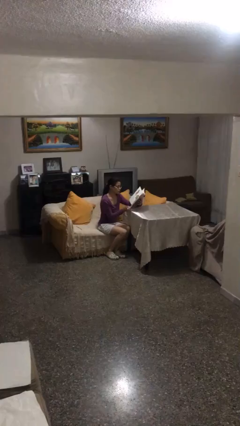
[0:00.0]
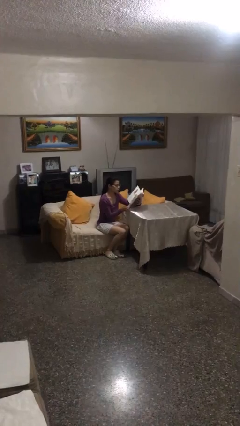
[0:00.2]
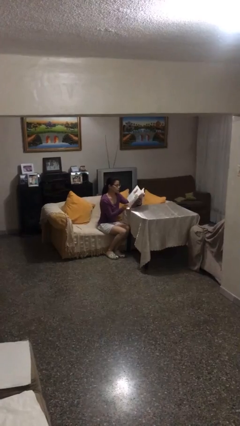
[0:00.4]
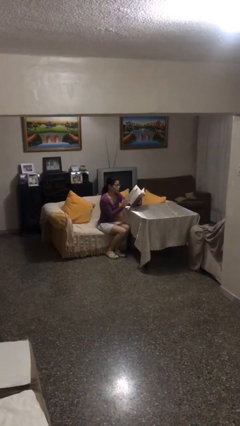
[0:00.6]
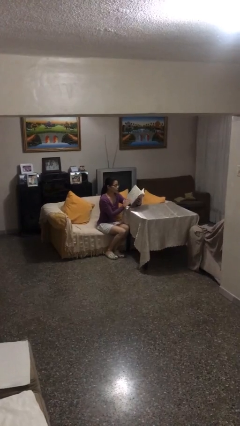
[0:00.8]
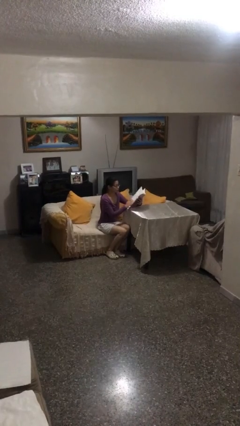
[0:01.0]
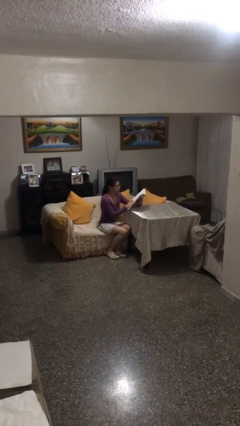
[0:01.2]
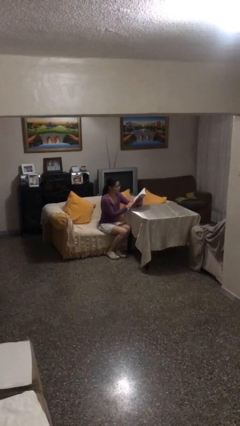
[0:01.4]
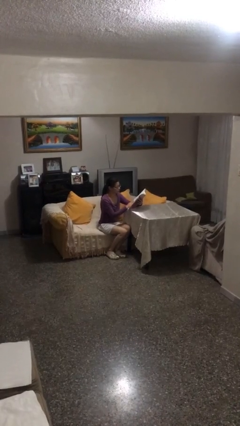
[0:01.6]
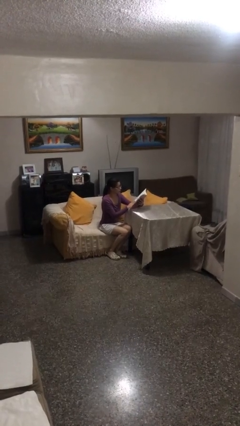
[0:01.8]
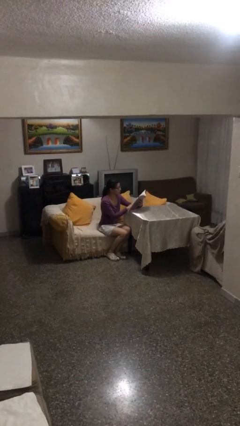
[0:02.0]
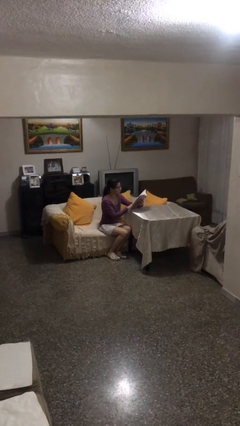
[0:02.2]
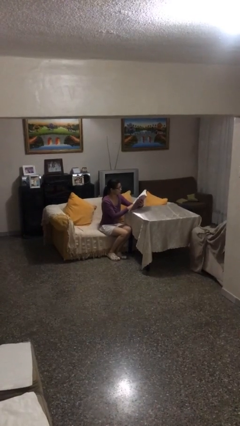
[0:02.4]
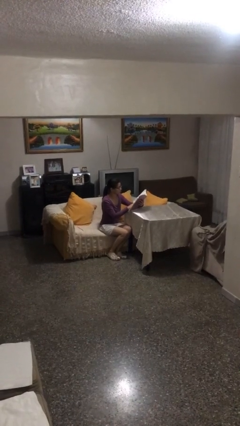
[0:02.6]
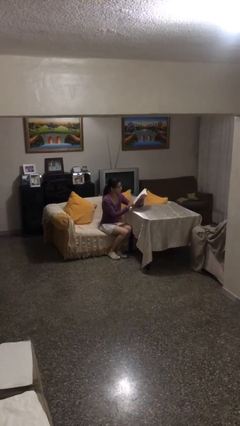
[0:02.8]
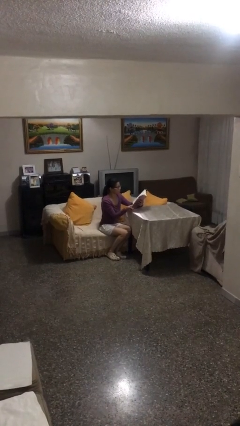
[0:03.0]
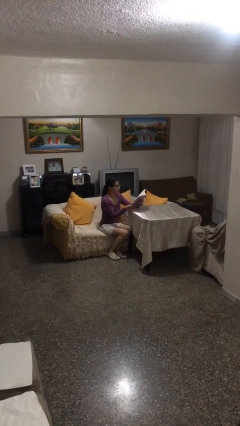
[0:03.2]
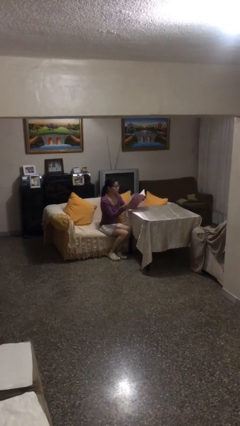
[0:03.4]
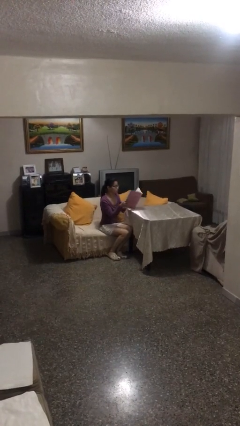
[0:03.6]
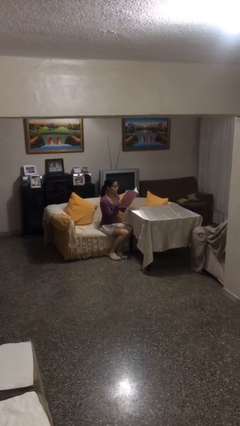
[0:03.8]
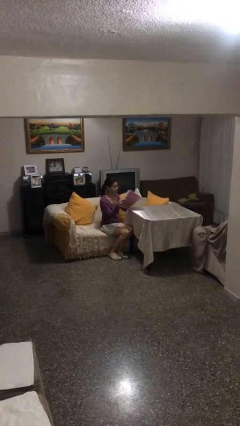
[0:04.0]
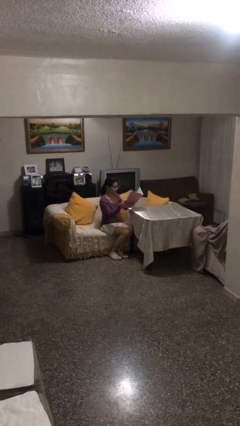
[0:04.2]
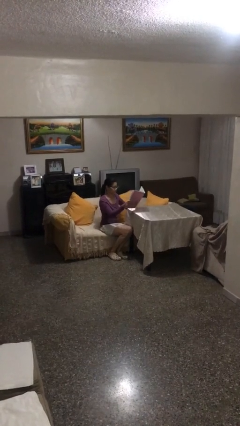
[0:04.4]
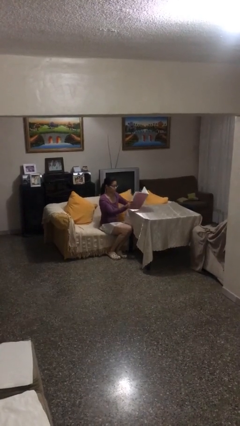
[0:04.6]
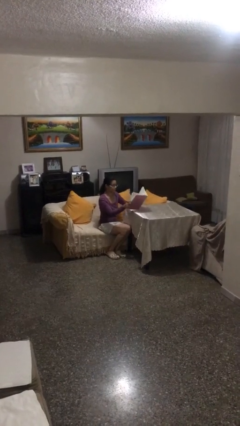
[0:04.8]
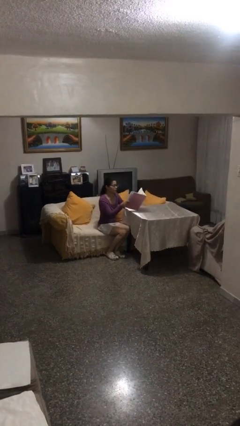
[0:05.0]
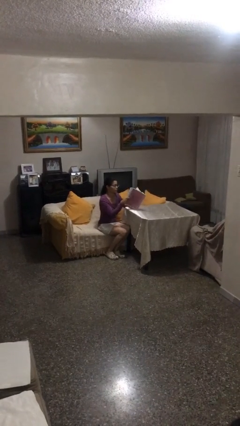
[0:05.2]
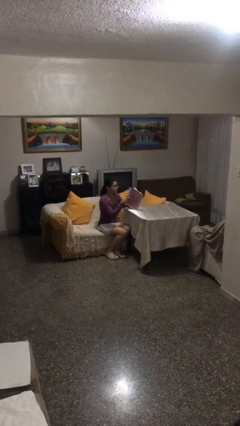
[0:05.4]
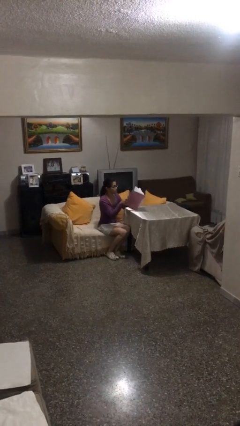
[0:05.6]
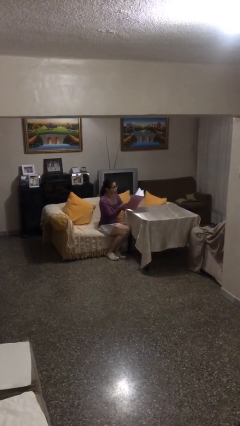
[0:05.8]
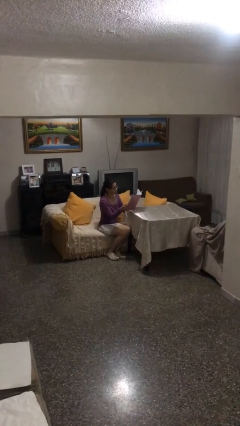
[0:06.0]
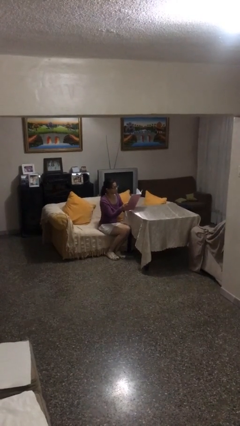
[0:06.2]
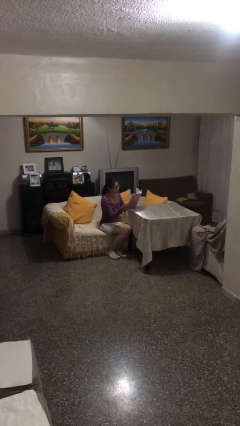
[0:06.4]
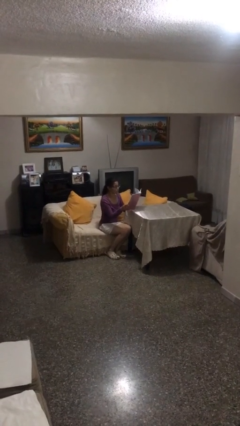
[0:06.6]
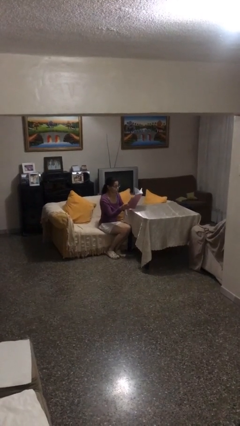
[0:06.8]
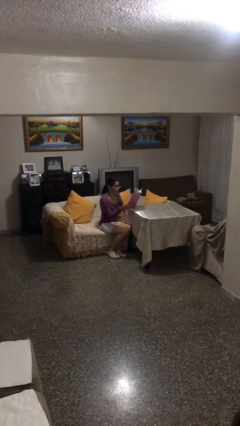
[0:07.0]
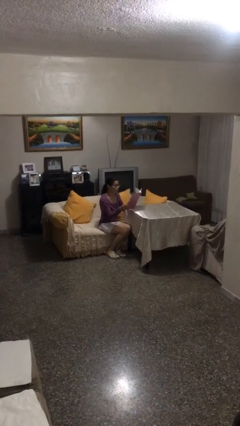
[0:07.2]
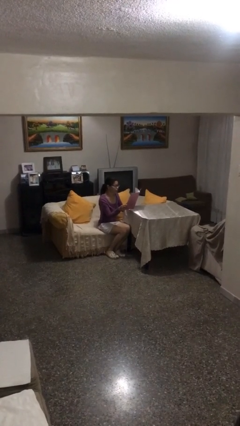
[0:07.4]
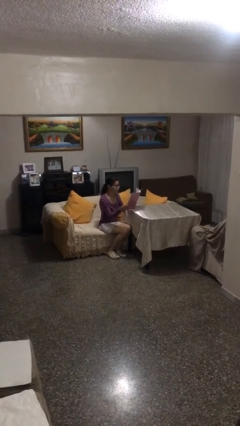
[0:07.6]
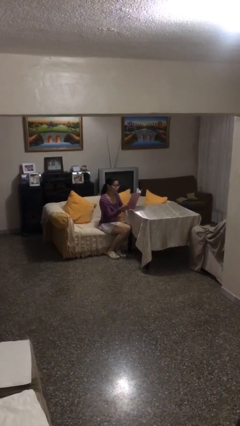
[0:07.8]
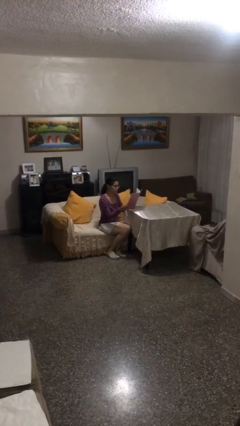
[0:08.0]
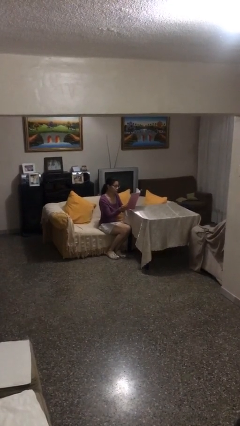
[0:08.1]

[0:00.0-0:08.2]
person reads document

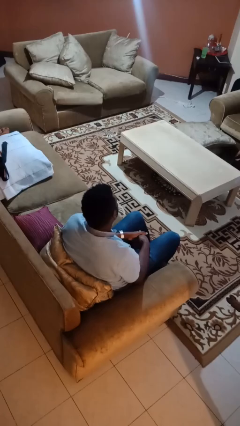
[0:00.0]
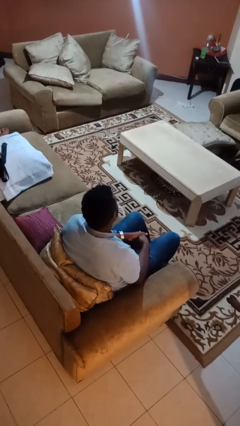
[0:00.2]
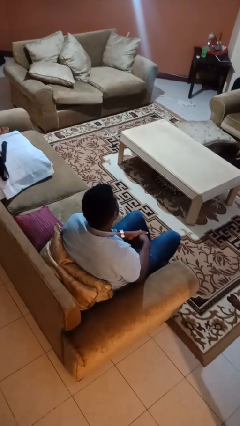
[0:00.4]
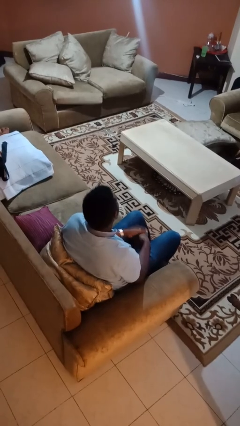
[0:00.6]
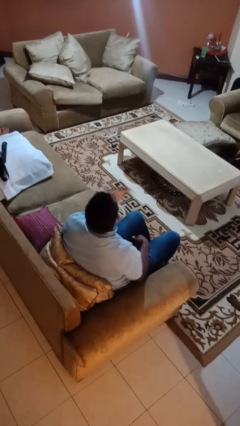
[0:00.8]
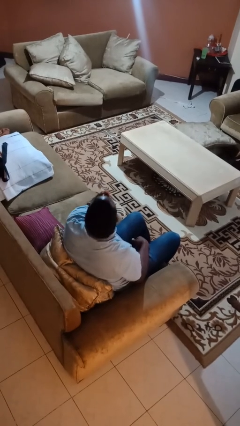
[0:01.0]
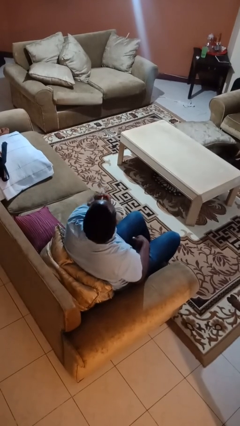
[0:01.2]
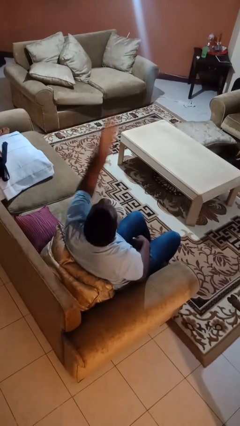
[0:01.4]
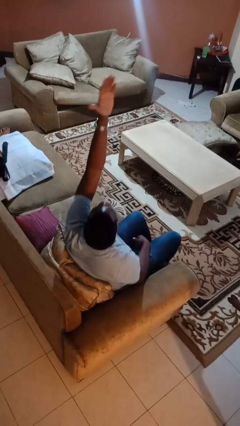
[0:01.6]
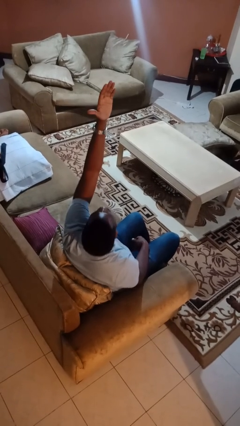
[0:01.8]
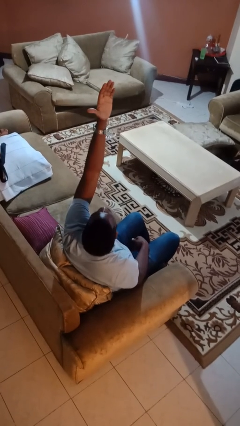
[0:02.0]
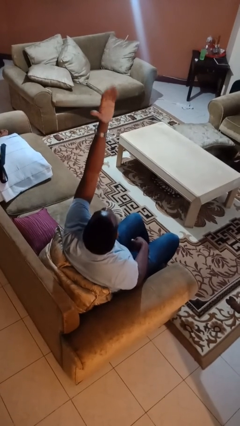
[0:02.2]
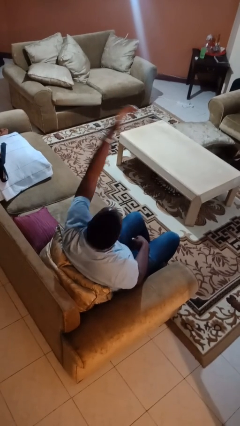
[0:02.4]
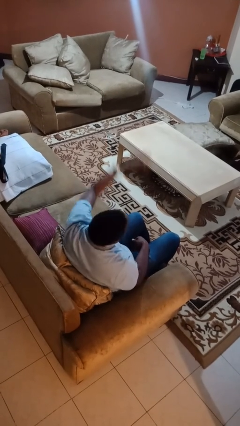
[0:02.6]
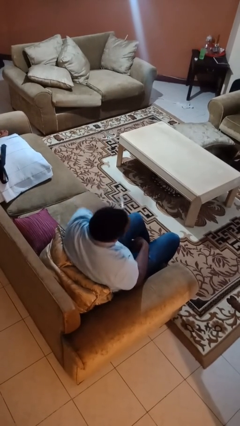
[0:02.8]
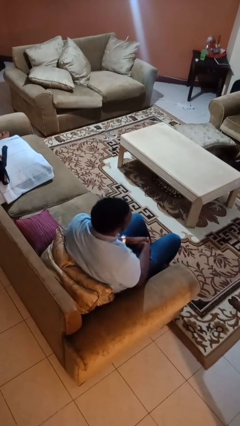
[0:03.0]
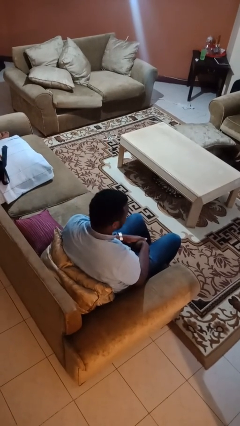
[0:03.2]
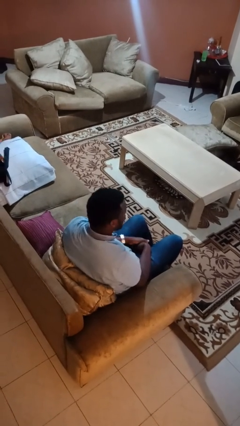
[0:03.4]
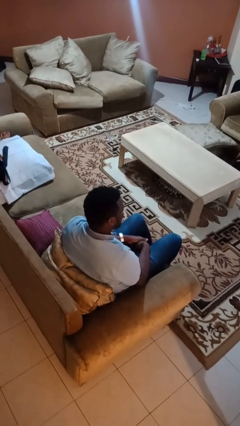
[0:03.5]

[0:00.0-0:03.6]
person gestures blow kiss

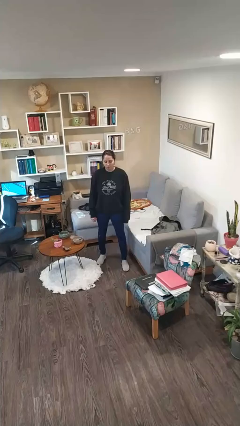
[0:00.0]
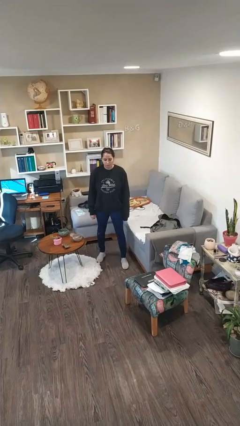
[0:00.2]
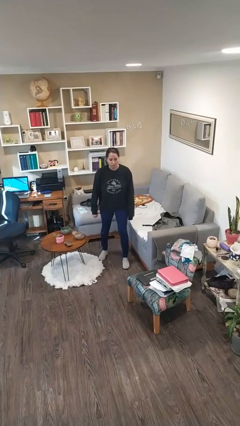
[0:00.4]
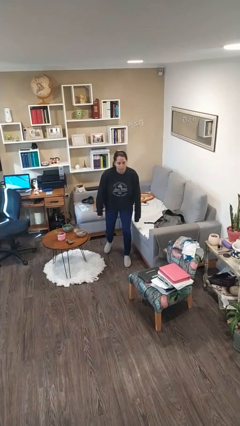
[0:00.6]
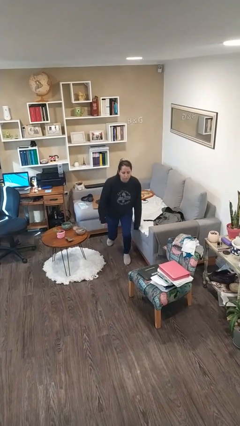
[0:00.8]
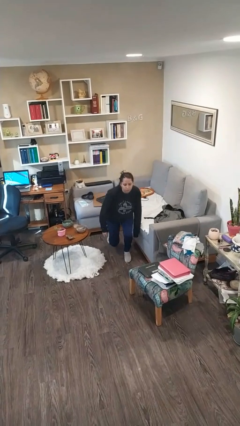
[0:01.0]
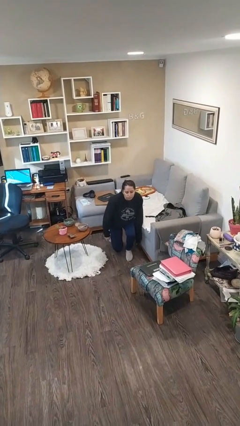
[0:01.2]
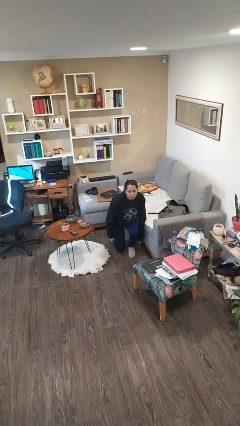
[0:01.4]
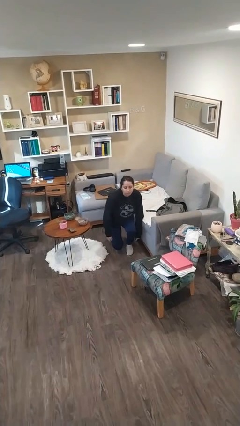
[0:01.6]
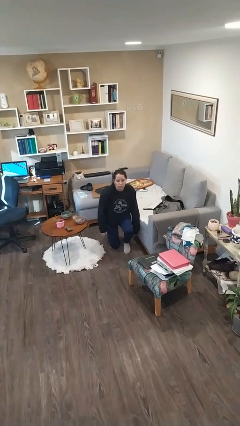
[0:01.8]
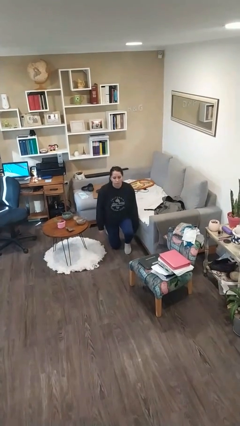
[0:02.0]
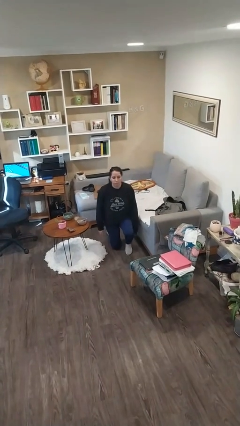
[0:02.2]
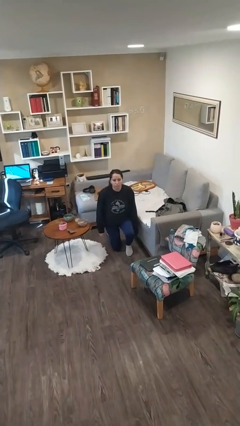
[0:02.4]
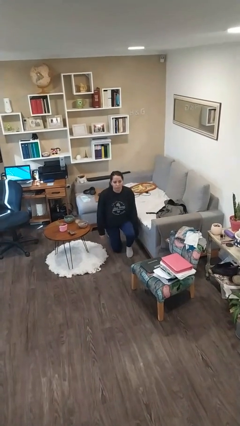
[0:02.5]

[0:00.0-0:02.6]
person kneels

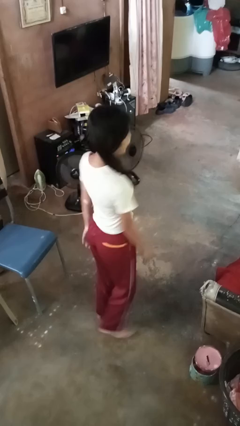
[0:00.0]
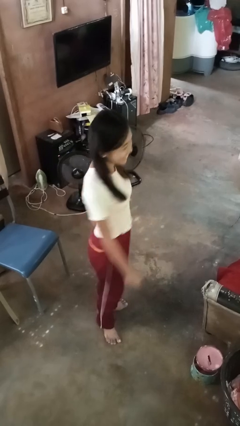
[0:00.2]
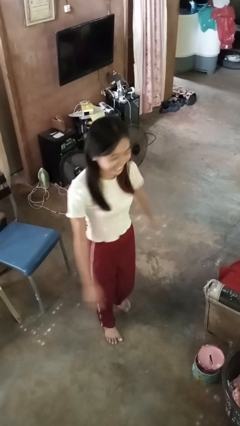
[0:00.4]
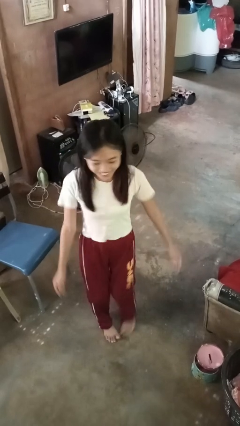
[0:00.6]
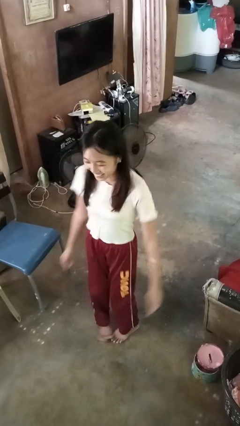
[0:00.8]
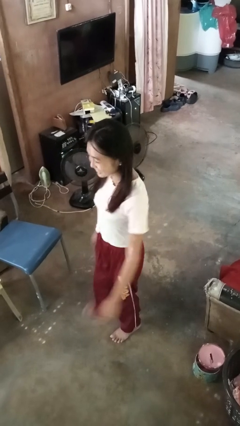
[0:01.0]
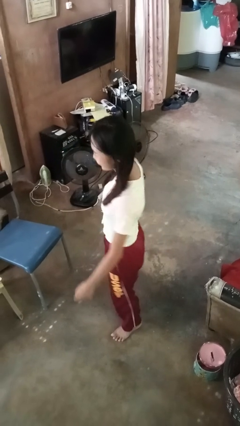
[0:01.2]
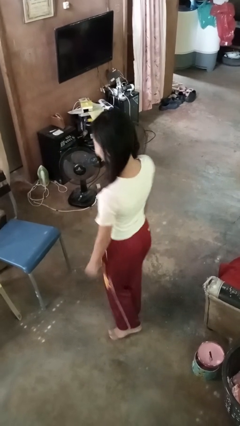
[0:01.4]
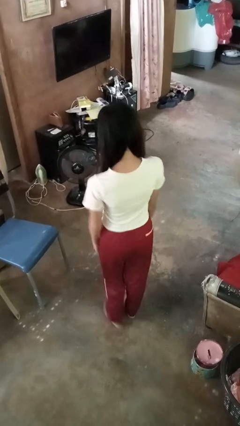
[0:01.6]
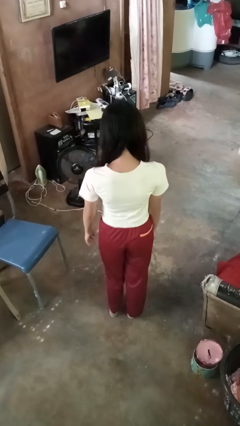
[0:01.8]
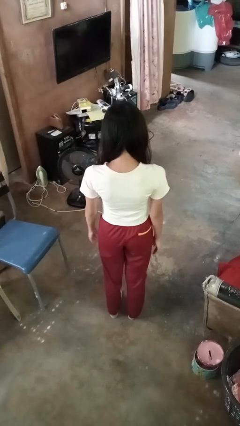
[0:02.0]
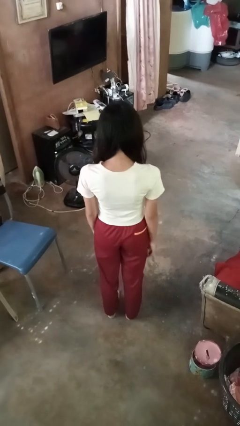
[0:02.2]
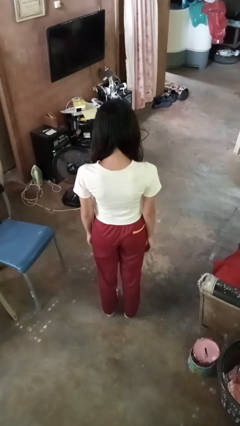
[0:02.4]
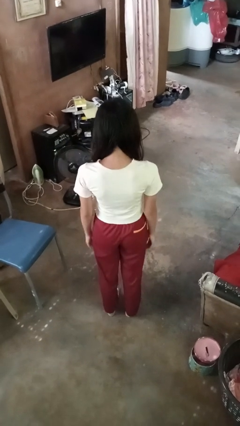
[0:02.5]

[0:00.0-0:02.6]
person twirls

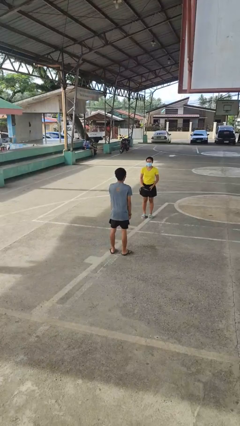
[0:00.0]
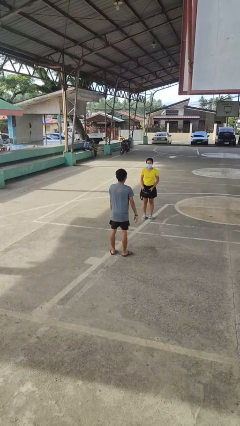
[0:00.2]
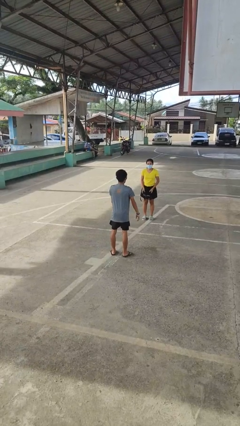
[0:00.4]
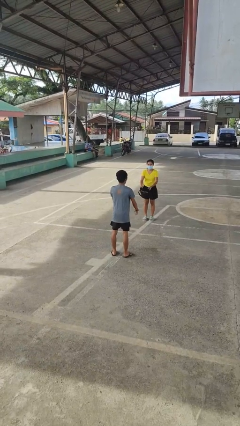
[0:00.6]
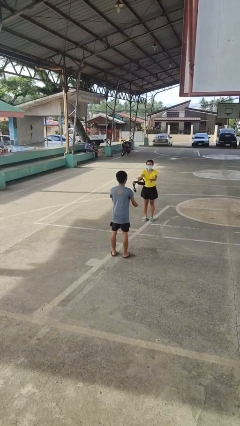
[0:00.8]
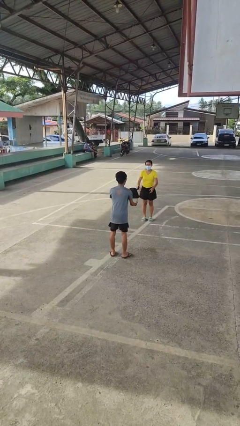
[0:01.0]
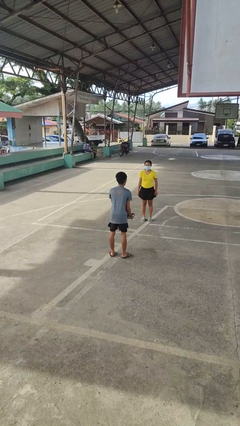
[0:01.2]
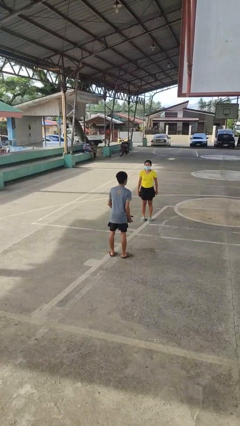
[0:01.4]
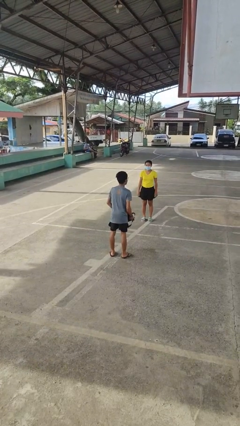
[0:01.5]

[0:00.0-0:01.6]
person catches object from person
